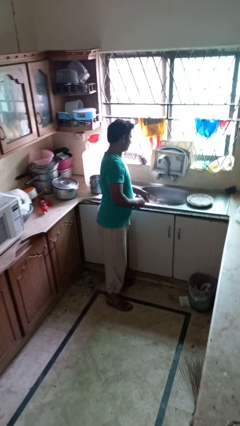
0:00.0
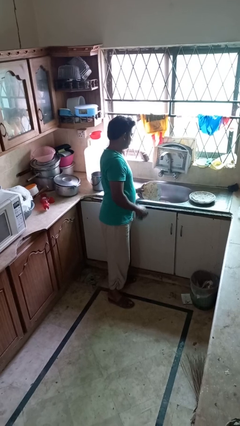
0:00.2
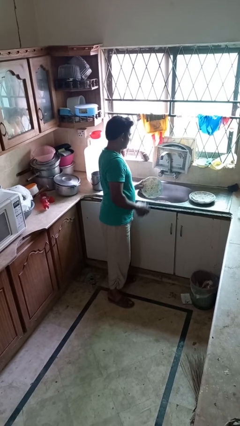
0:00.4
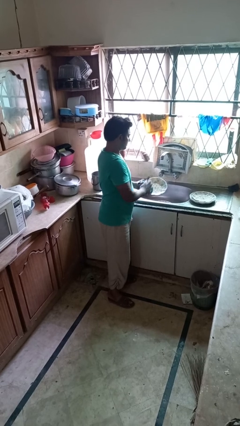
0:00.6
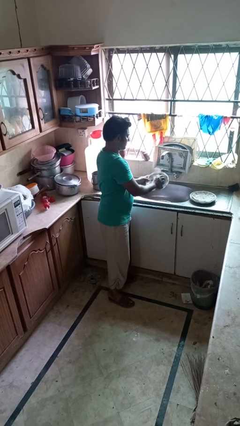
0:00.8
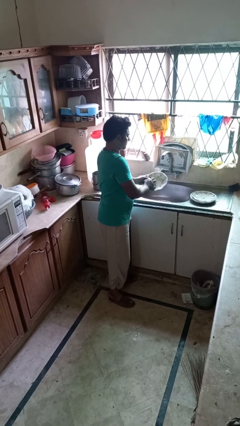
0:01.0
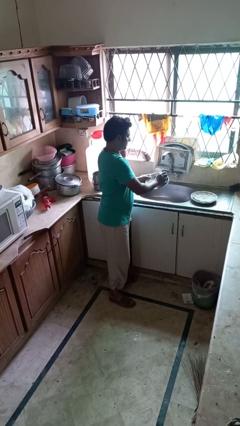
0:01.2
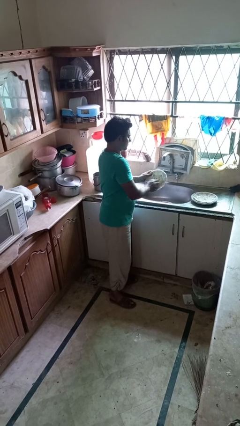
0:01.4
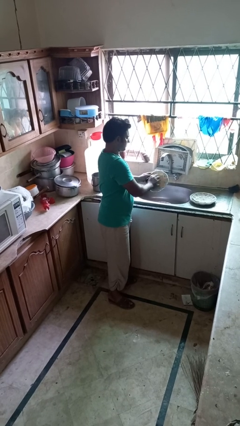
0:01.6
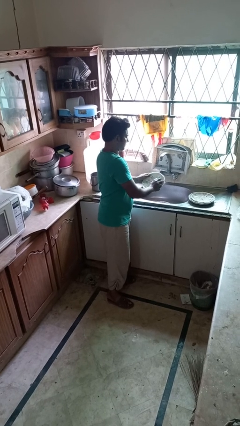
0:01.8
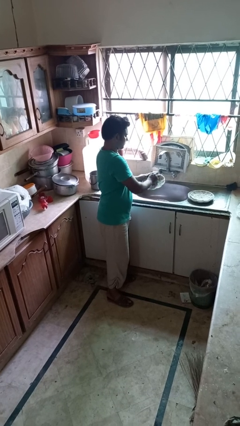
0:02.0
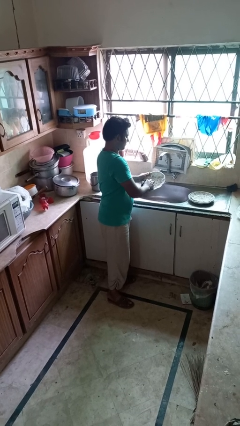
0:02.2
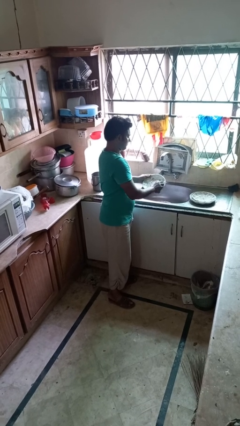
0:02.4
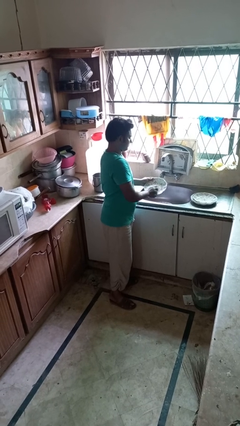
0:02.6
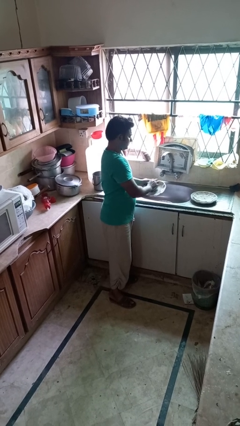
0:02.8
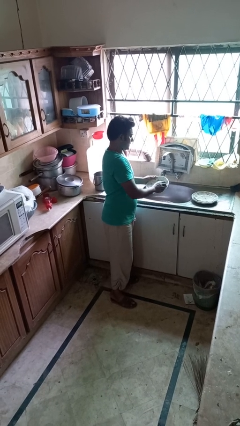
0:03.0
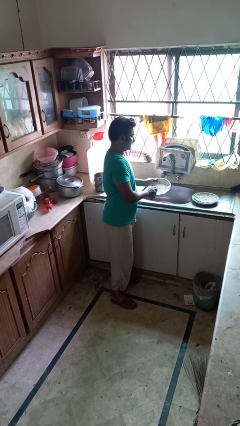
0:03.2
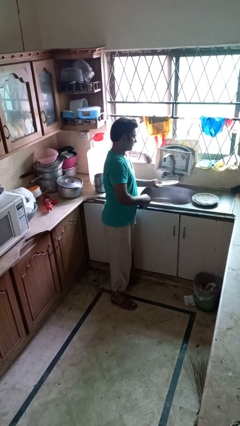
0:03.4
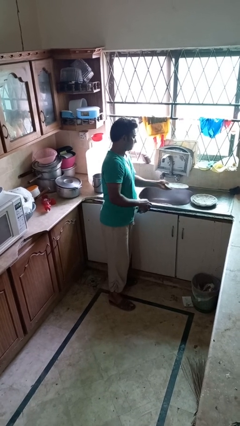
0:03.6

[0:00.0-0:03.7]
person dries dish

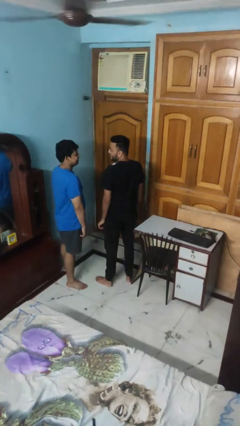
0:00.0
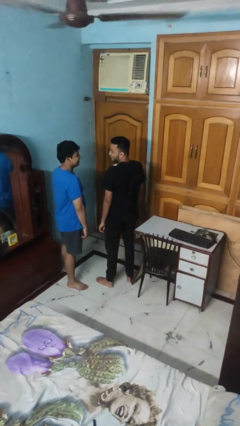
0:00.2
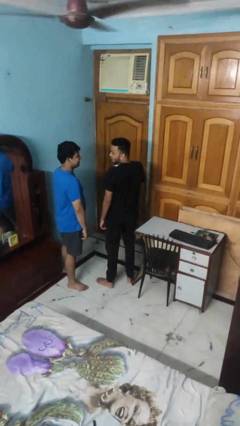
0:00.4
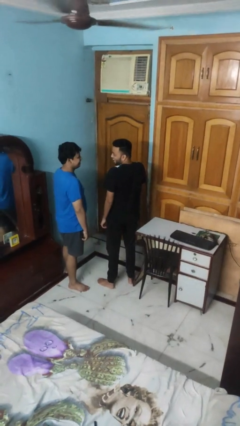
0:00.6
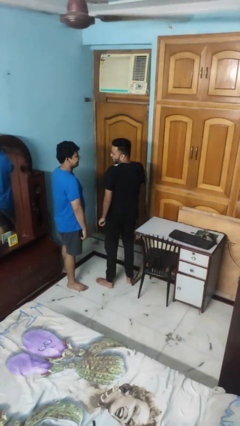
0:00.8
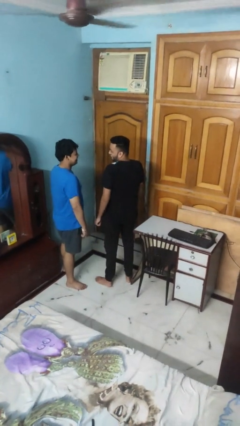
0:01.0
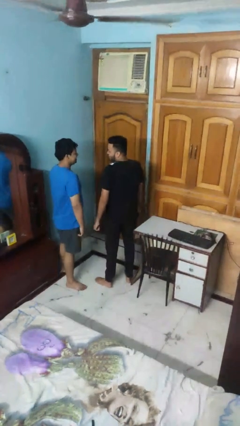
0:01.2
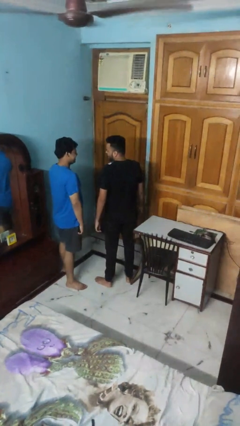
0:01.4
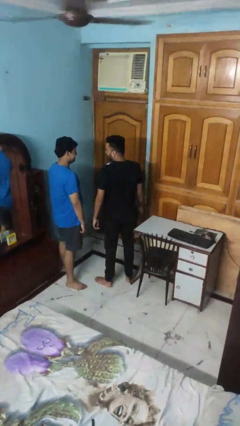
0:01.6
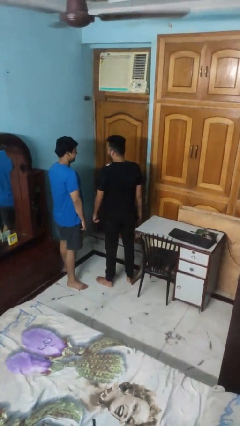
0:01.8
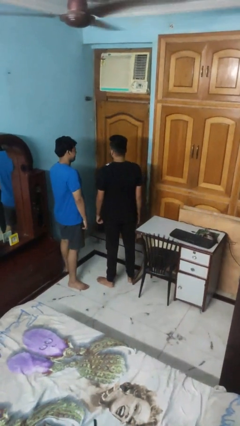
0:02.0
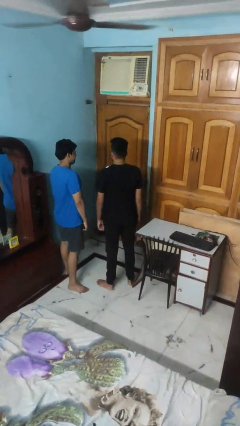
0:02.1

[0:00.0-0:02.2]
person laughs with person

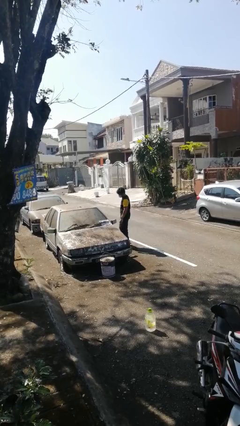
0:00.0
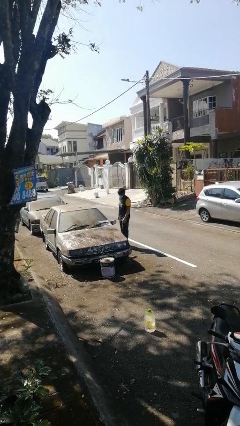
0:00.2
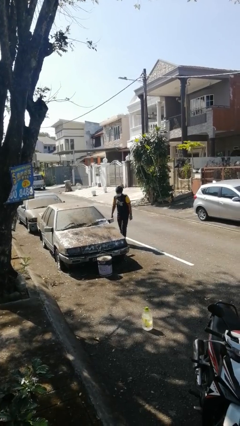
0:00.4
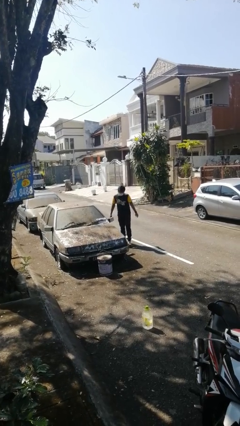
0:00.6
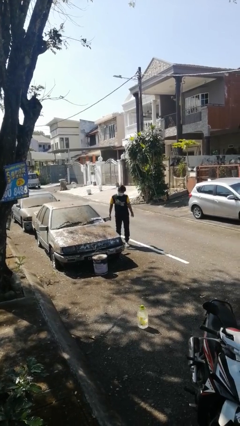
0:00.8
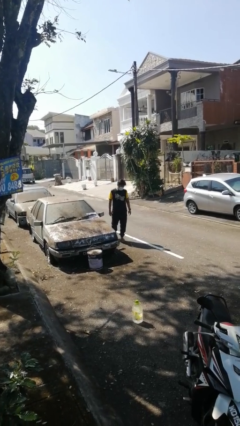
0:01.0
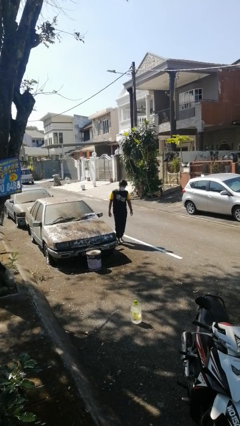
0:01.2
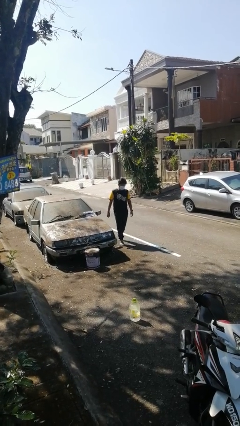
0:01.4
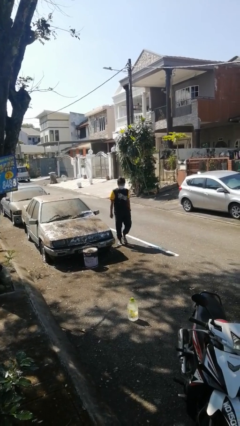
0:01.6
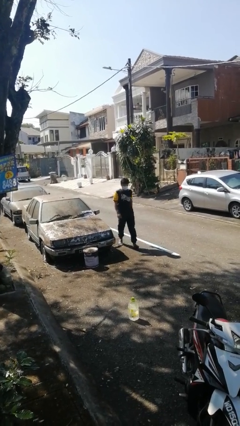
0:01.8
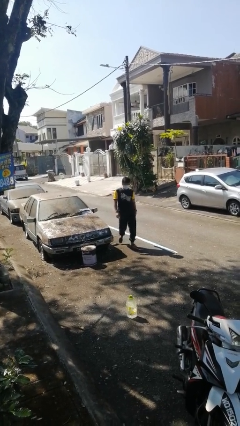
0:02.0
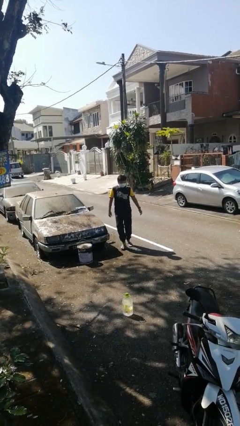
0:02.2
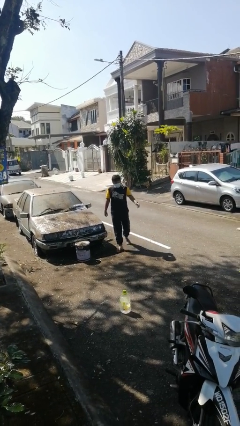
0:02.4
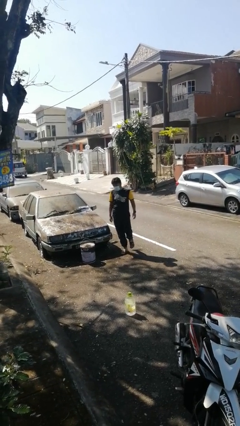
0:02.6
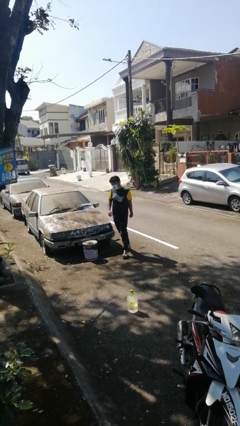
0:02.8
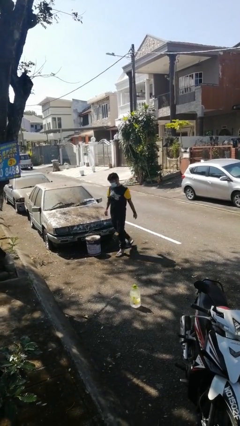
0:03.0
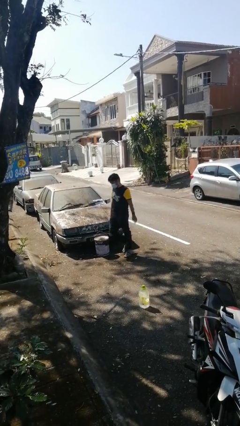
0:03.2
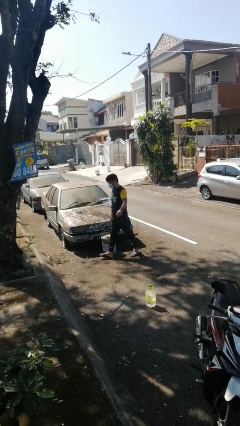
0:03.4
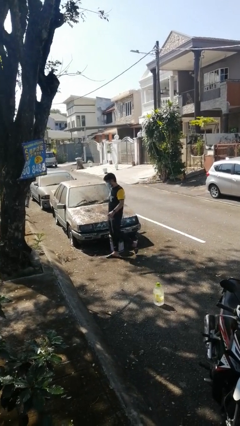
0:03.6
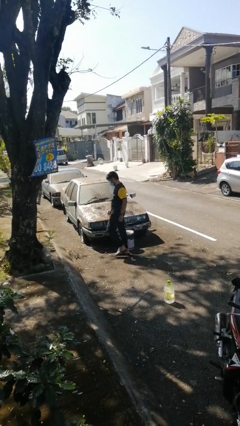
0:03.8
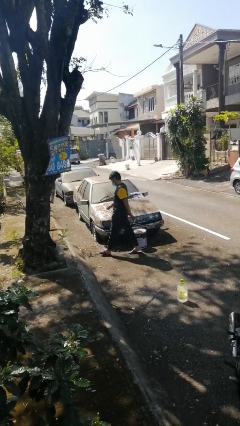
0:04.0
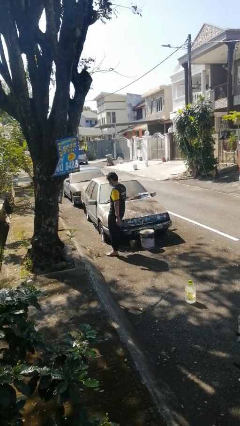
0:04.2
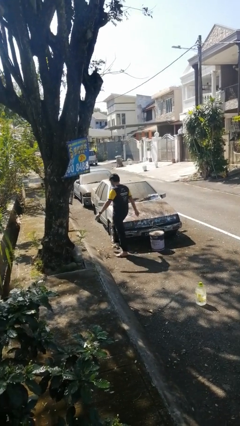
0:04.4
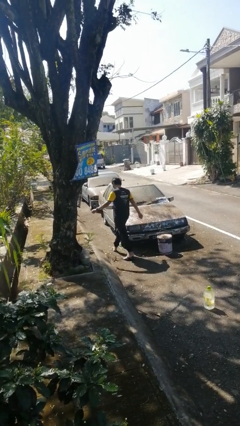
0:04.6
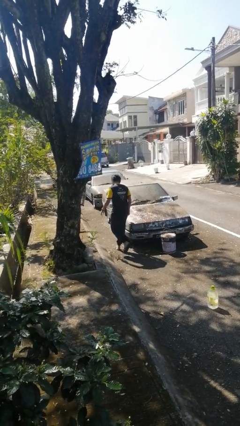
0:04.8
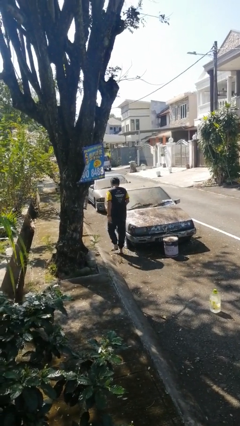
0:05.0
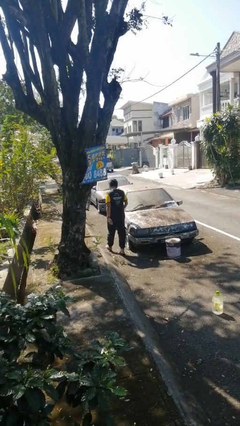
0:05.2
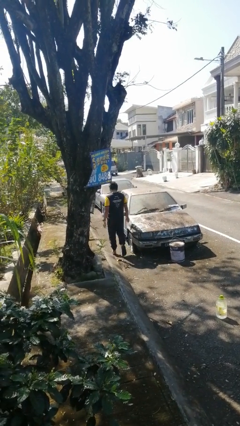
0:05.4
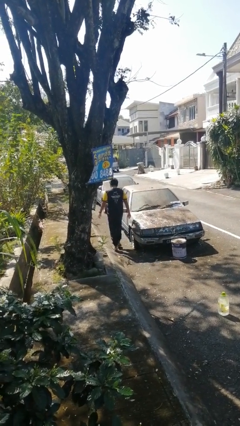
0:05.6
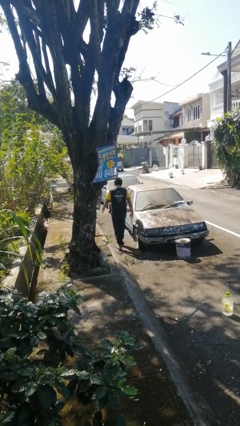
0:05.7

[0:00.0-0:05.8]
person walks around car

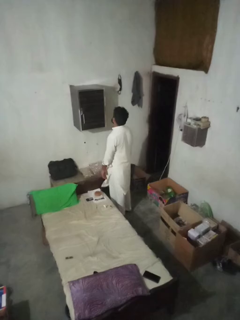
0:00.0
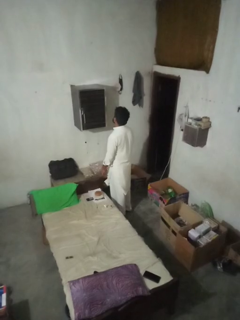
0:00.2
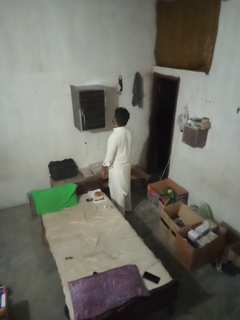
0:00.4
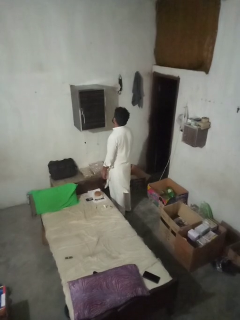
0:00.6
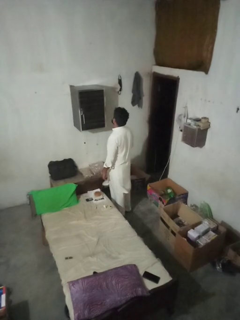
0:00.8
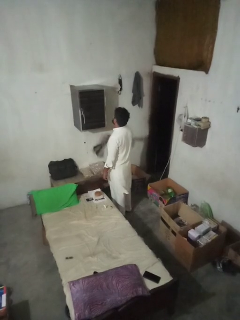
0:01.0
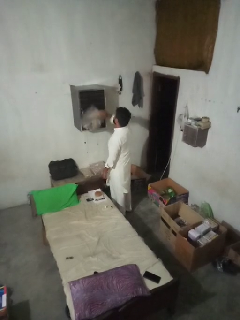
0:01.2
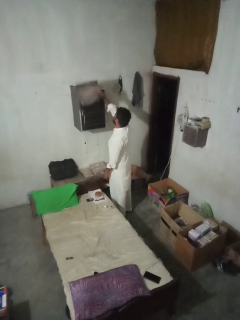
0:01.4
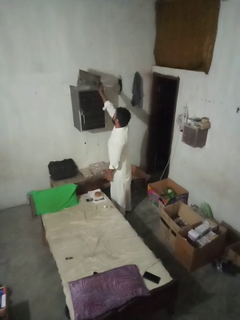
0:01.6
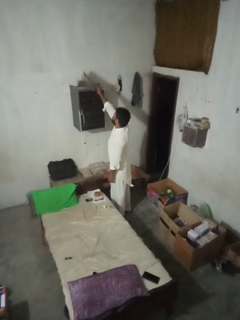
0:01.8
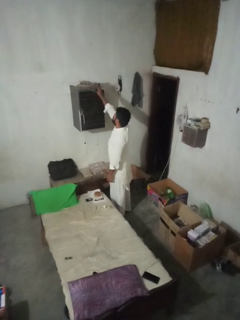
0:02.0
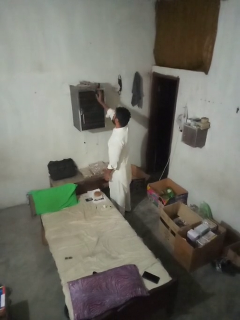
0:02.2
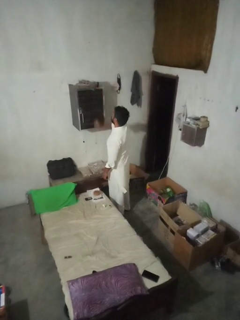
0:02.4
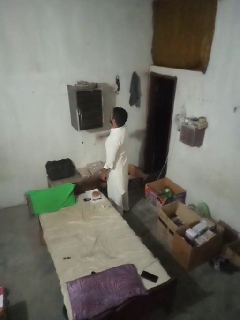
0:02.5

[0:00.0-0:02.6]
person puts down object on shelf

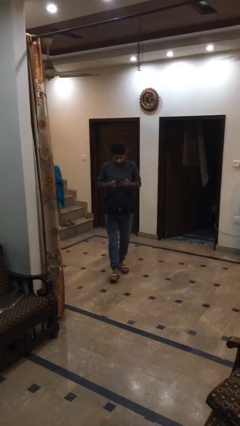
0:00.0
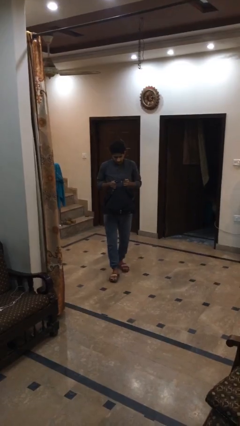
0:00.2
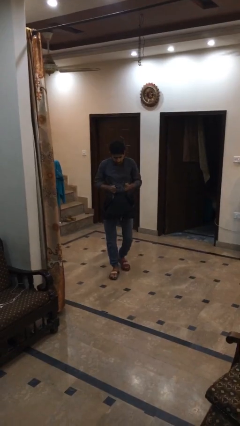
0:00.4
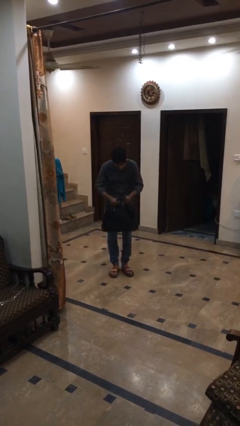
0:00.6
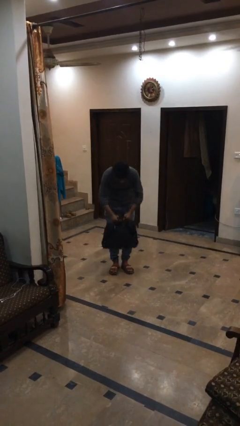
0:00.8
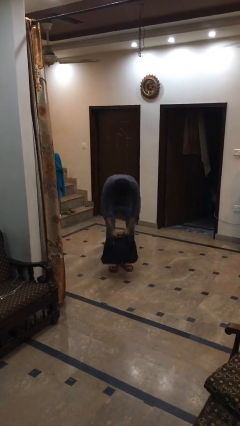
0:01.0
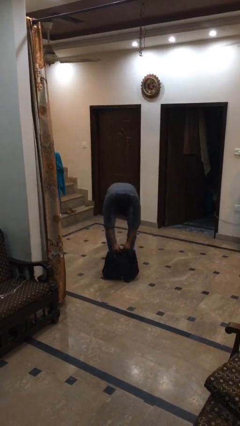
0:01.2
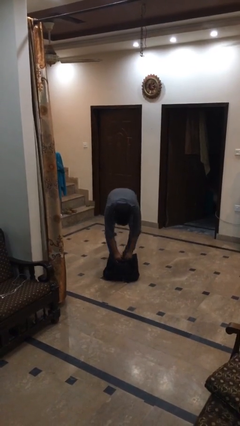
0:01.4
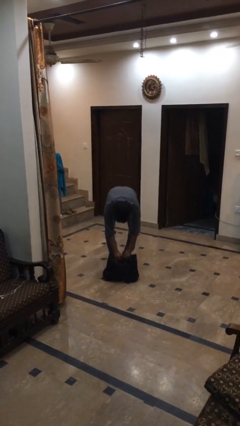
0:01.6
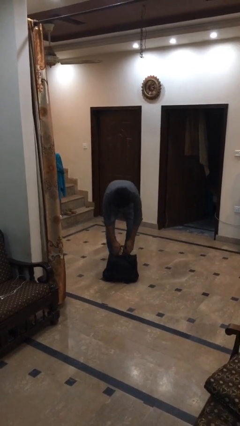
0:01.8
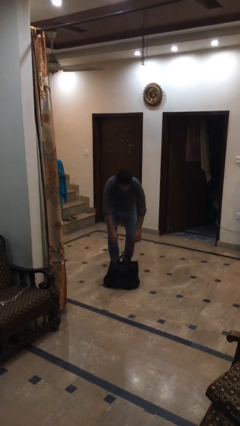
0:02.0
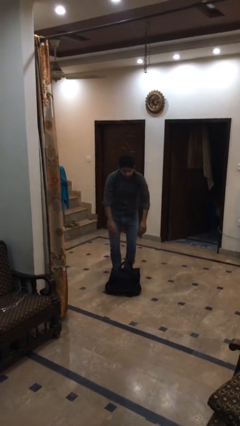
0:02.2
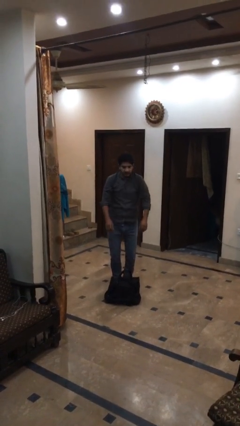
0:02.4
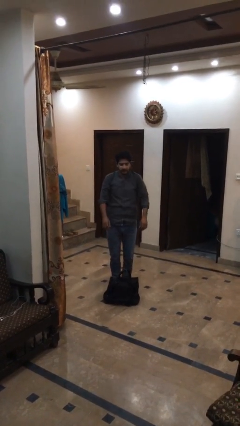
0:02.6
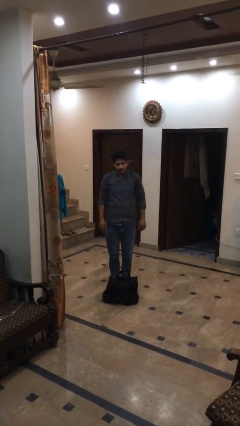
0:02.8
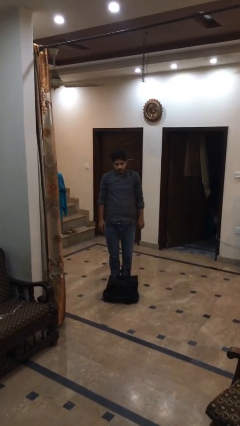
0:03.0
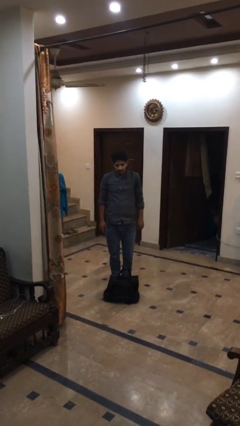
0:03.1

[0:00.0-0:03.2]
person puts down object on floor

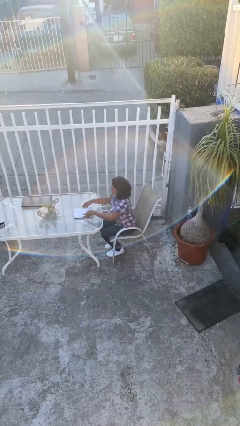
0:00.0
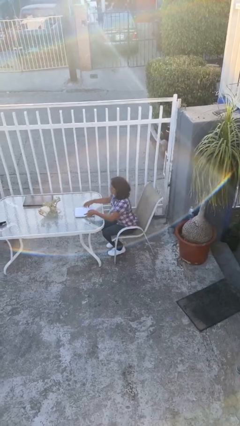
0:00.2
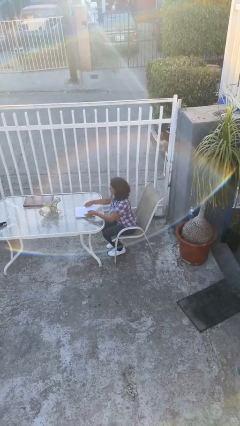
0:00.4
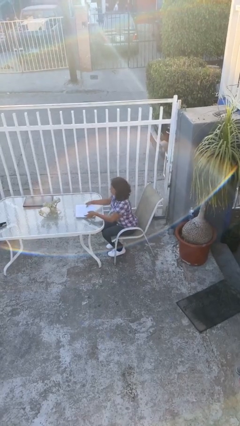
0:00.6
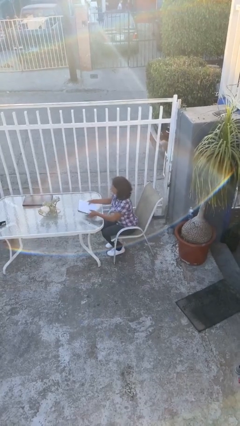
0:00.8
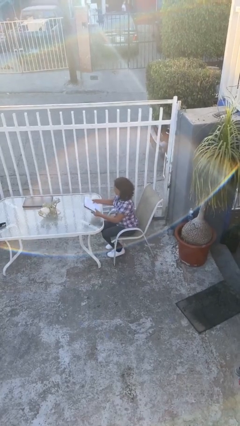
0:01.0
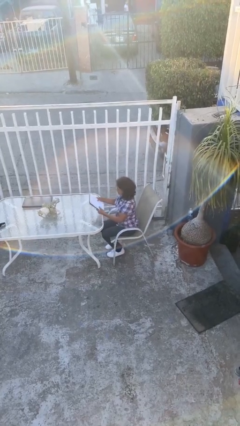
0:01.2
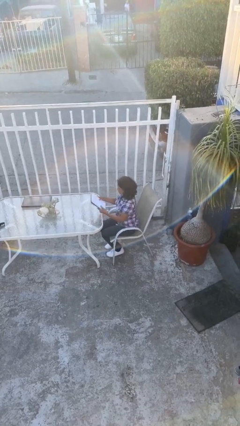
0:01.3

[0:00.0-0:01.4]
person picks up object from table
